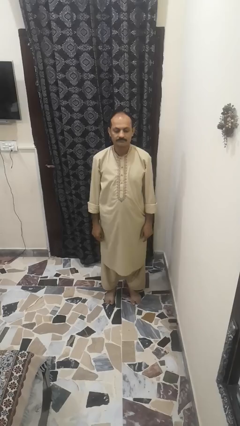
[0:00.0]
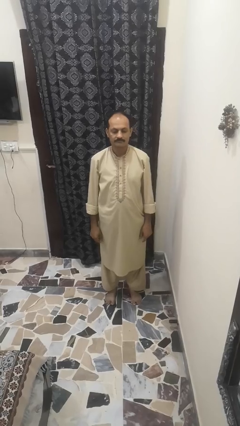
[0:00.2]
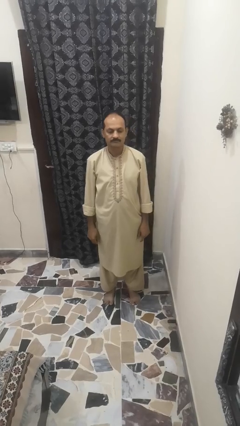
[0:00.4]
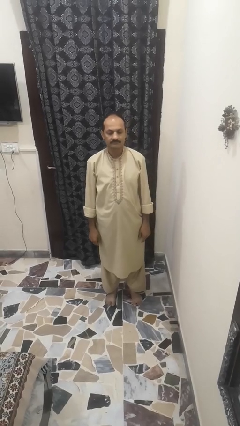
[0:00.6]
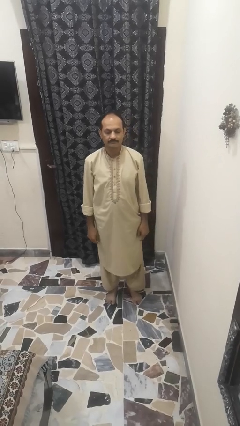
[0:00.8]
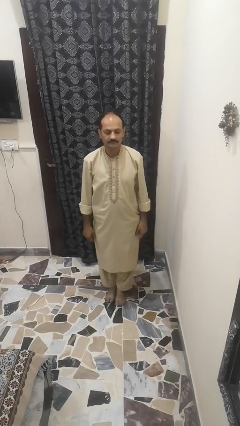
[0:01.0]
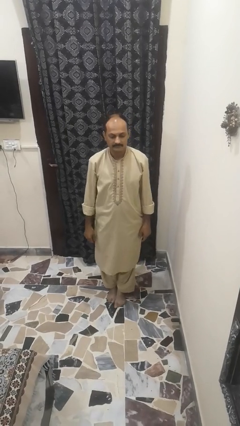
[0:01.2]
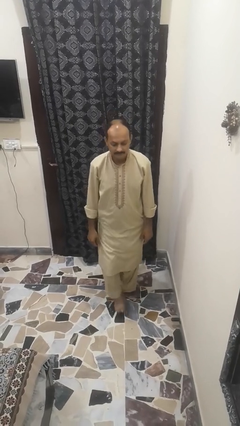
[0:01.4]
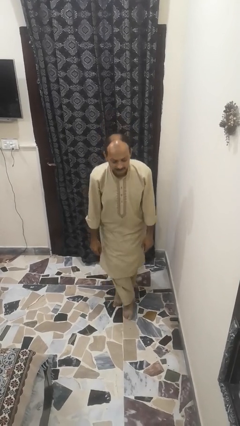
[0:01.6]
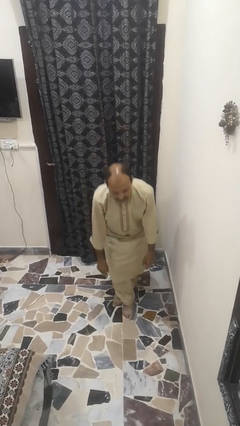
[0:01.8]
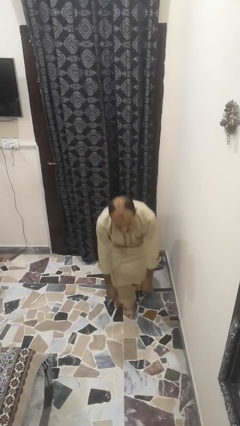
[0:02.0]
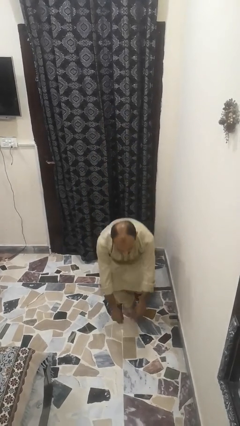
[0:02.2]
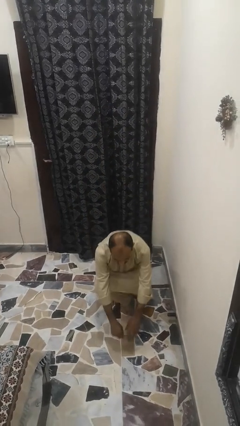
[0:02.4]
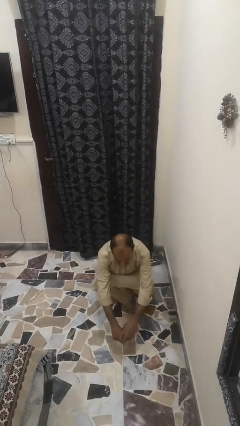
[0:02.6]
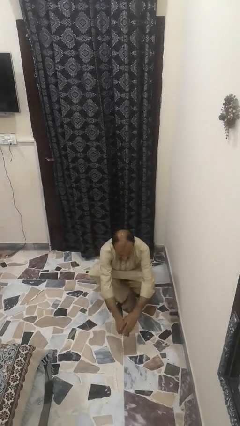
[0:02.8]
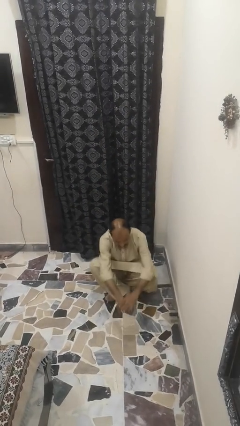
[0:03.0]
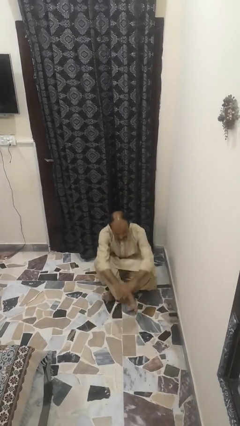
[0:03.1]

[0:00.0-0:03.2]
person reads newspaper

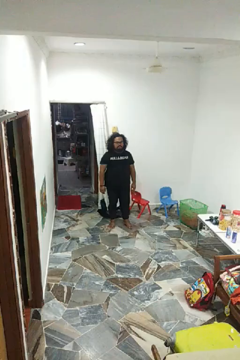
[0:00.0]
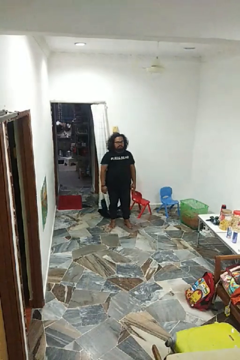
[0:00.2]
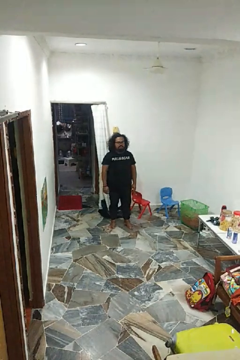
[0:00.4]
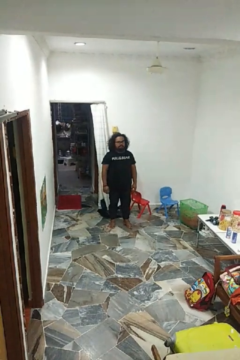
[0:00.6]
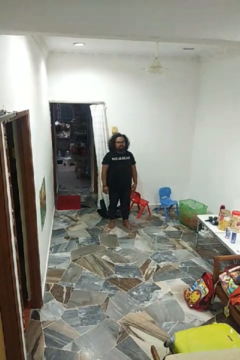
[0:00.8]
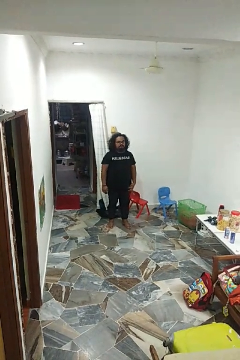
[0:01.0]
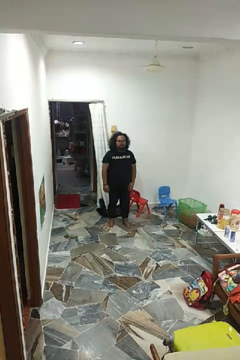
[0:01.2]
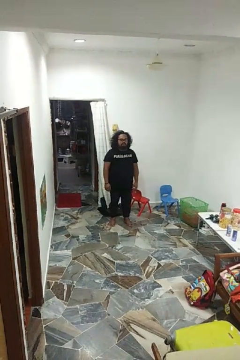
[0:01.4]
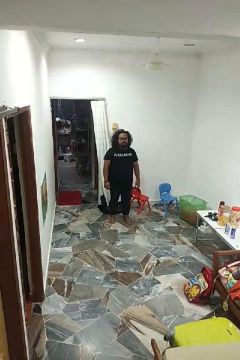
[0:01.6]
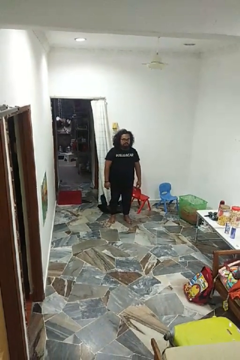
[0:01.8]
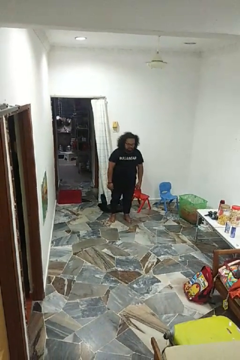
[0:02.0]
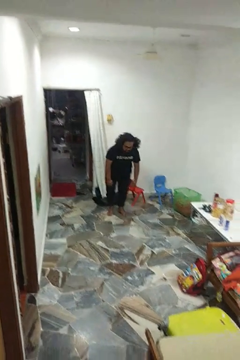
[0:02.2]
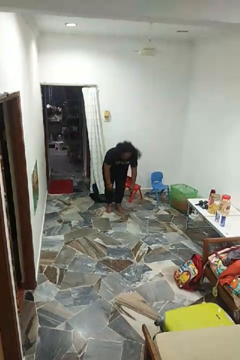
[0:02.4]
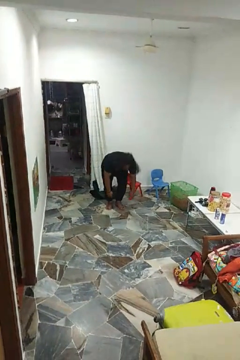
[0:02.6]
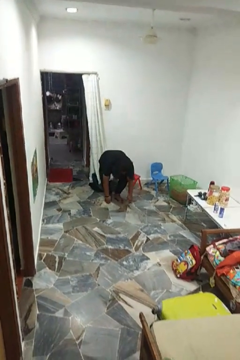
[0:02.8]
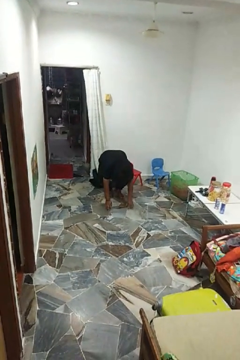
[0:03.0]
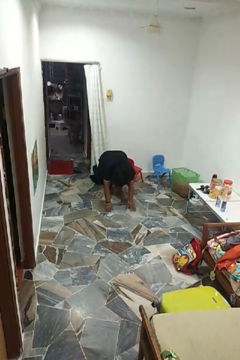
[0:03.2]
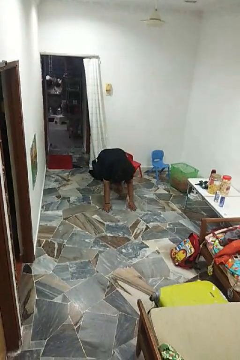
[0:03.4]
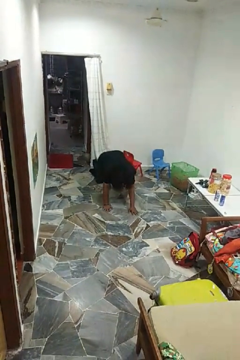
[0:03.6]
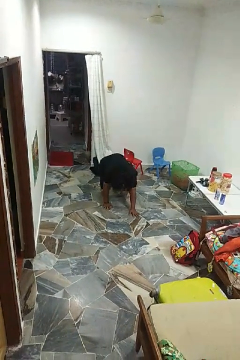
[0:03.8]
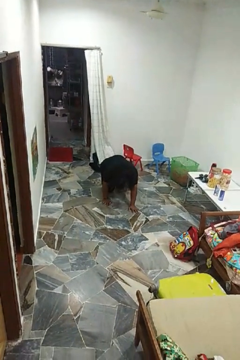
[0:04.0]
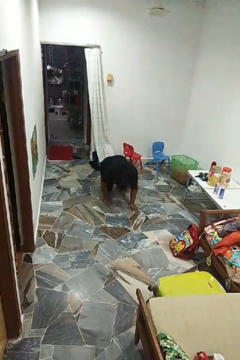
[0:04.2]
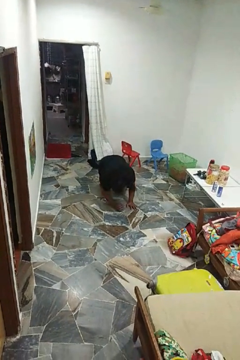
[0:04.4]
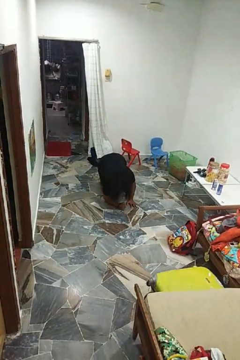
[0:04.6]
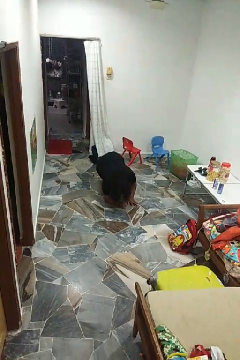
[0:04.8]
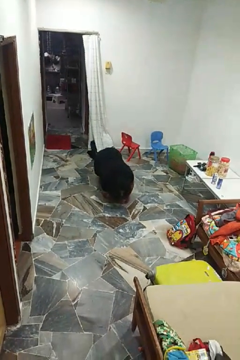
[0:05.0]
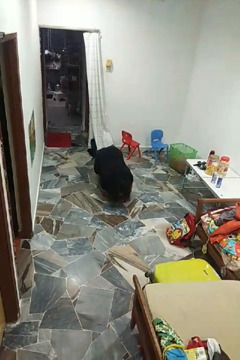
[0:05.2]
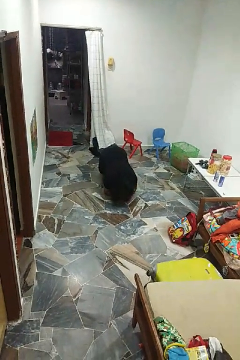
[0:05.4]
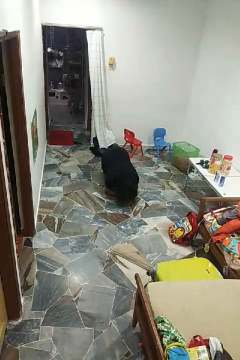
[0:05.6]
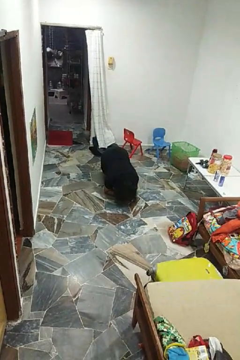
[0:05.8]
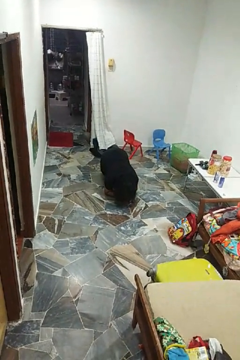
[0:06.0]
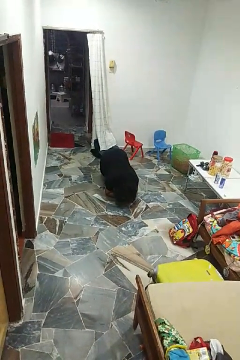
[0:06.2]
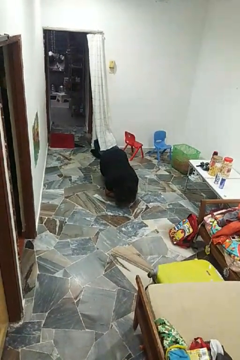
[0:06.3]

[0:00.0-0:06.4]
person exercises with plank

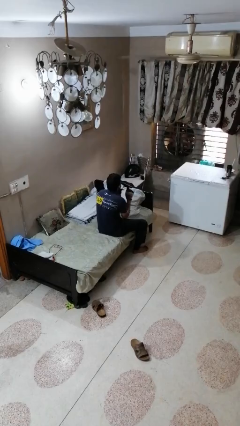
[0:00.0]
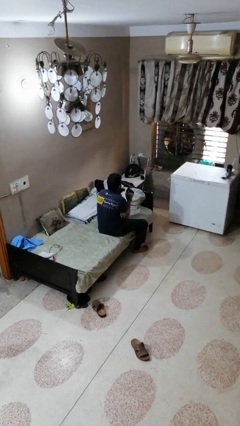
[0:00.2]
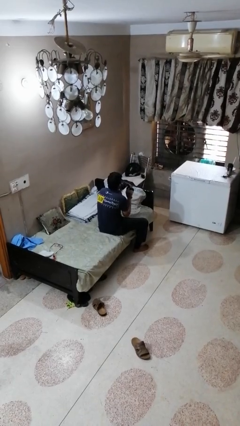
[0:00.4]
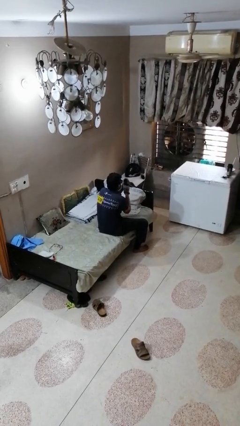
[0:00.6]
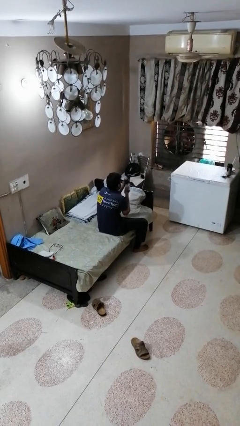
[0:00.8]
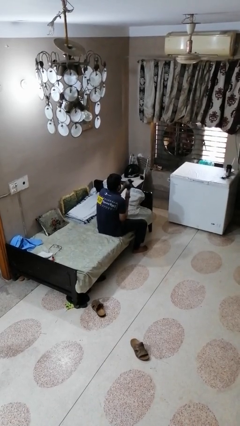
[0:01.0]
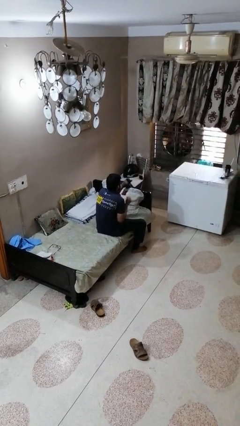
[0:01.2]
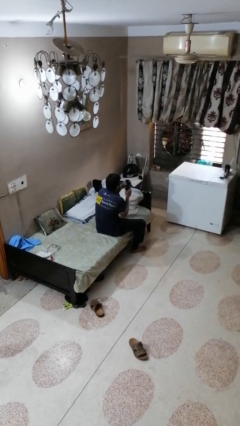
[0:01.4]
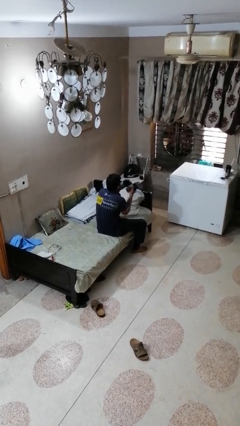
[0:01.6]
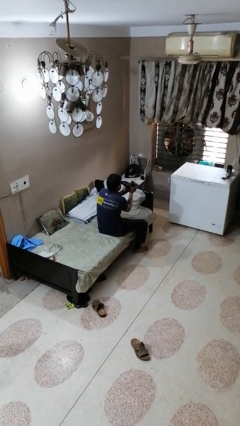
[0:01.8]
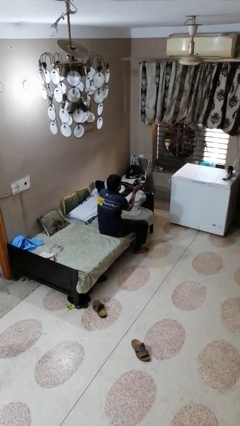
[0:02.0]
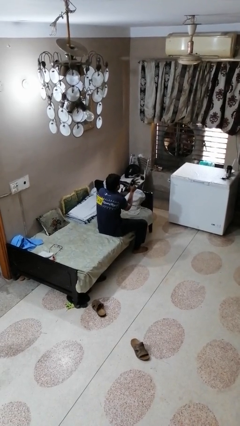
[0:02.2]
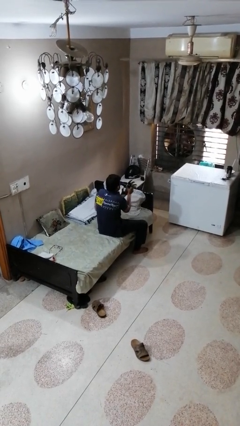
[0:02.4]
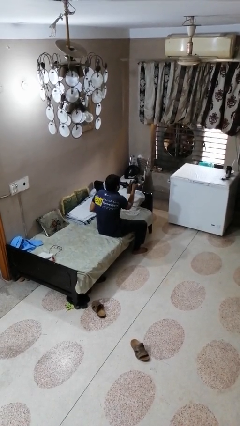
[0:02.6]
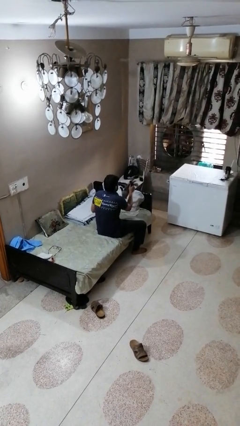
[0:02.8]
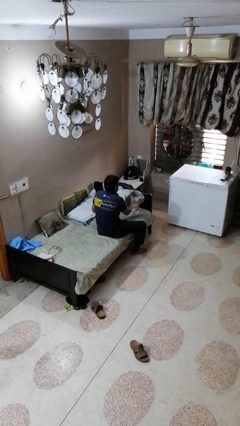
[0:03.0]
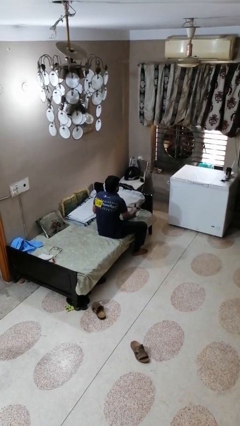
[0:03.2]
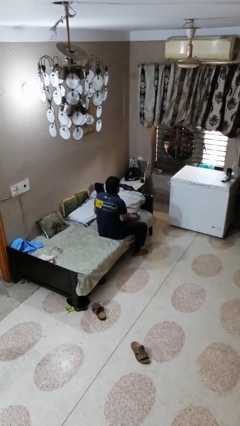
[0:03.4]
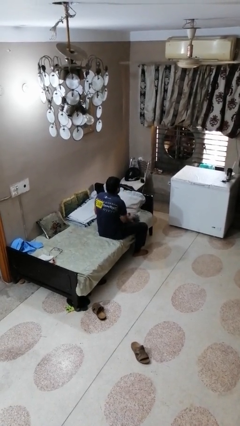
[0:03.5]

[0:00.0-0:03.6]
person takes off gloves

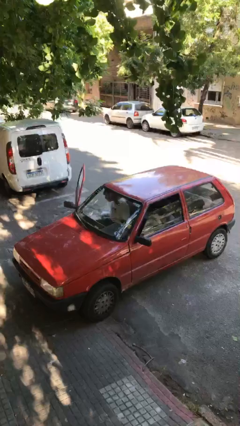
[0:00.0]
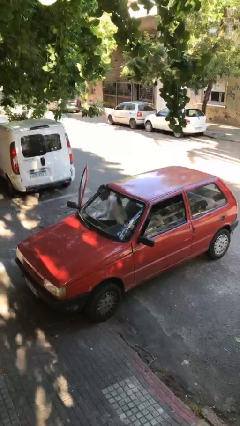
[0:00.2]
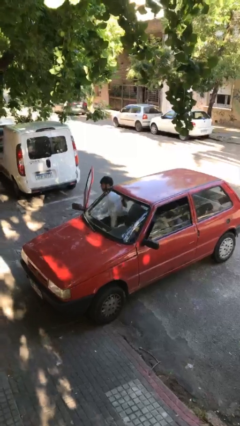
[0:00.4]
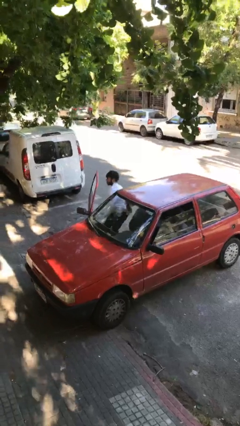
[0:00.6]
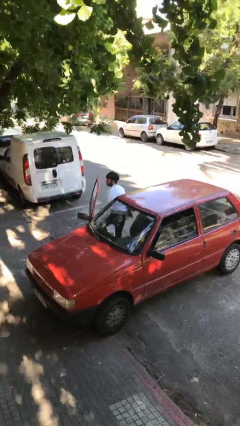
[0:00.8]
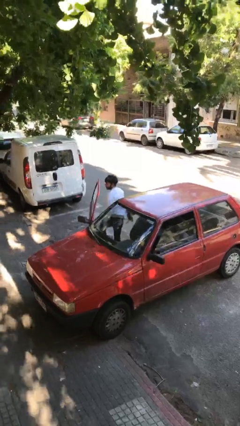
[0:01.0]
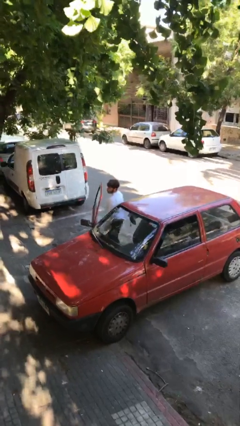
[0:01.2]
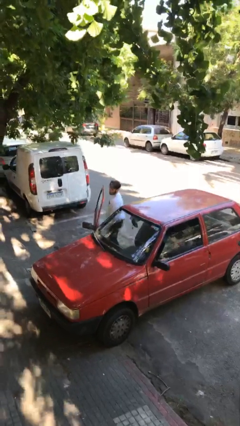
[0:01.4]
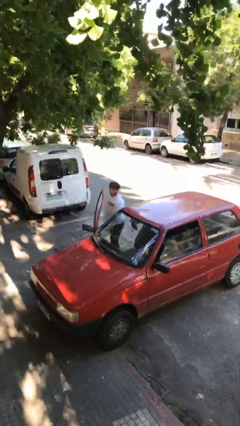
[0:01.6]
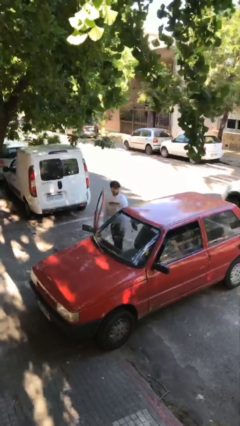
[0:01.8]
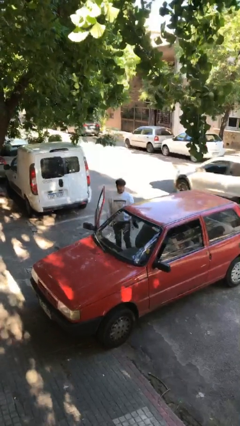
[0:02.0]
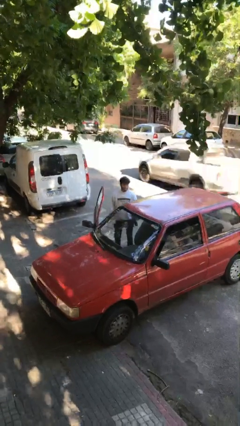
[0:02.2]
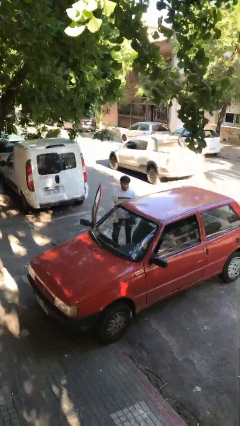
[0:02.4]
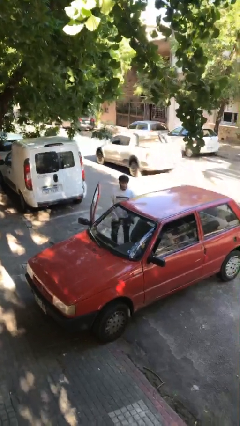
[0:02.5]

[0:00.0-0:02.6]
person exits car

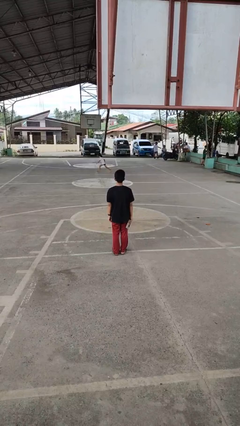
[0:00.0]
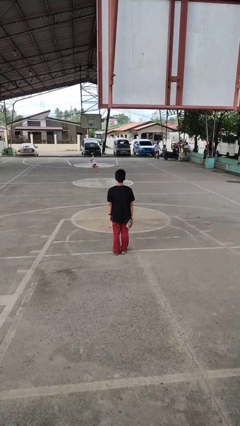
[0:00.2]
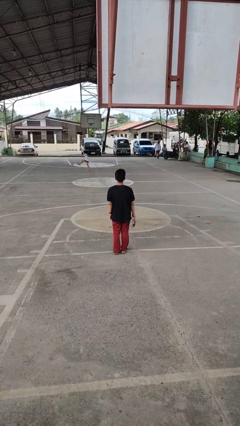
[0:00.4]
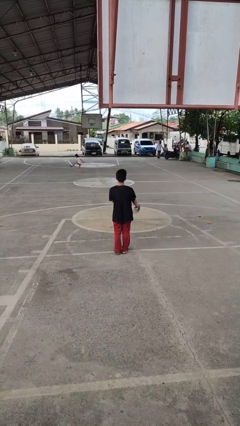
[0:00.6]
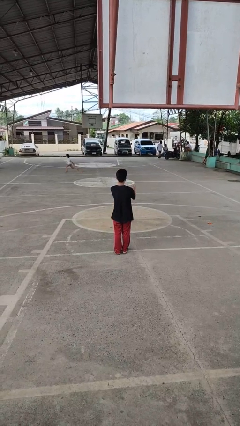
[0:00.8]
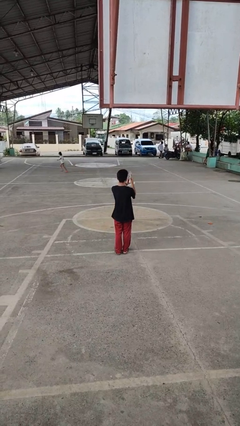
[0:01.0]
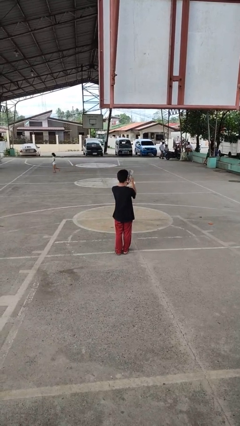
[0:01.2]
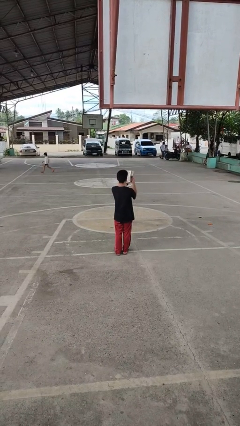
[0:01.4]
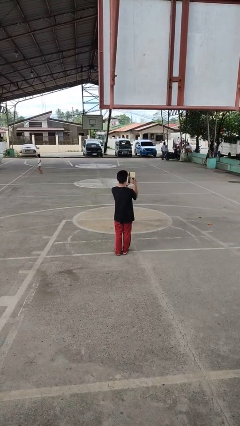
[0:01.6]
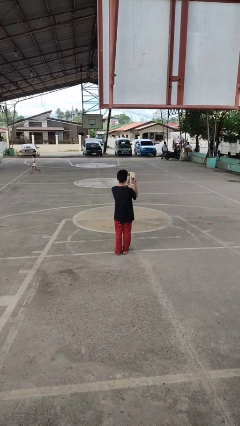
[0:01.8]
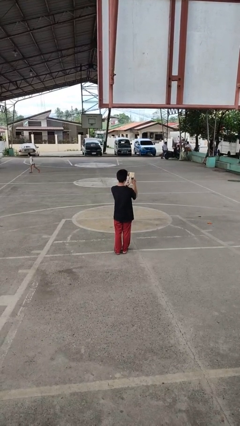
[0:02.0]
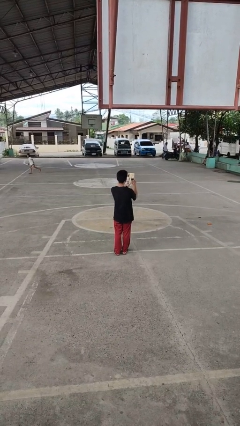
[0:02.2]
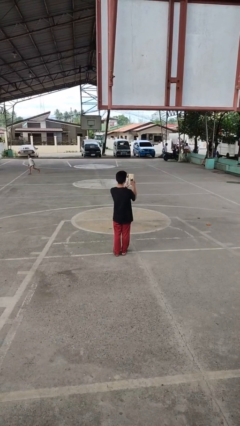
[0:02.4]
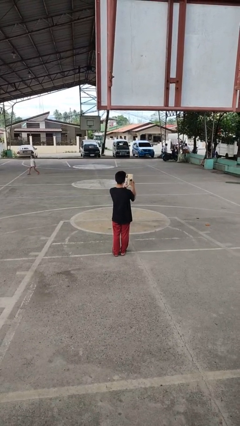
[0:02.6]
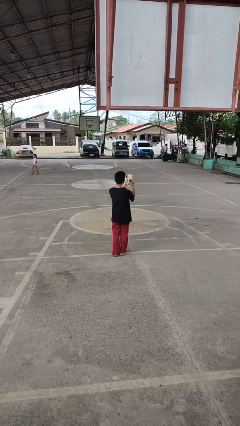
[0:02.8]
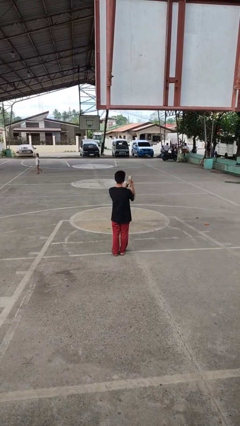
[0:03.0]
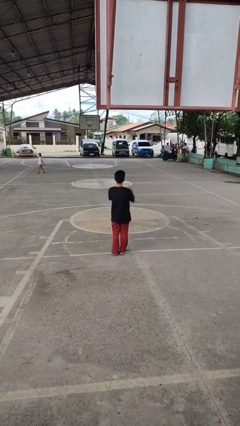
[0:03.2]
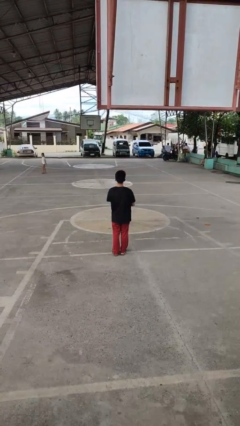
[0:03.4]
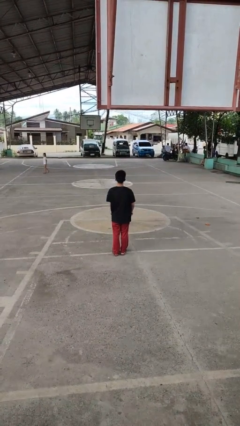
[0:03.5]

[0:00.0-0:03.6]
person reads magazine
